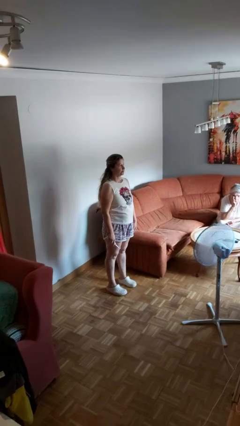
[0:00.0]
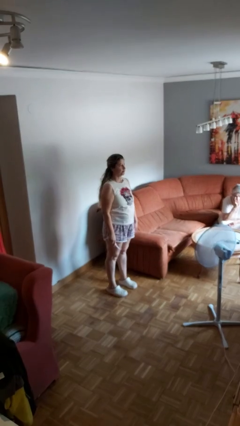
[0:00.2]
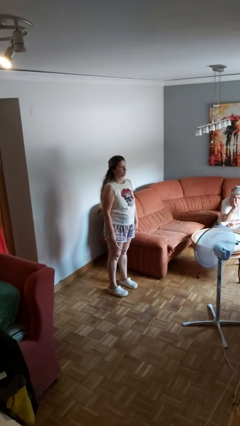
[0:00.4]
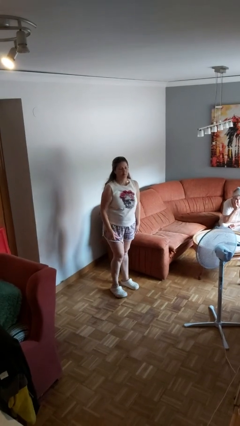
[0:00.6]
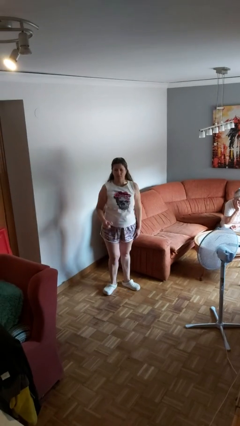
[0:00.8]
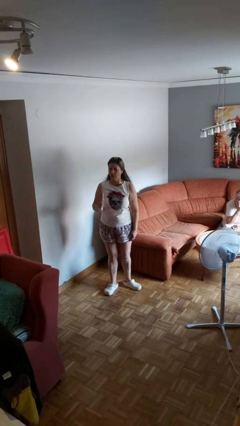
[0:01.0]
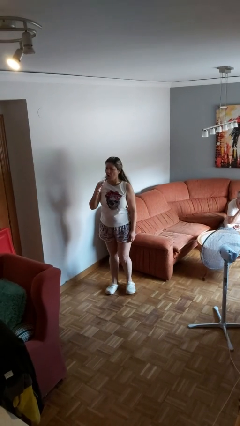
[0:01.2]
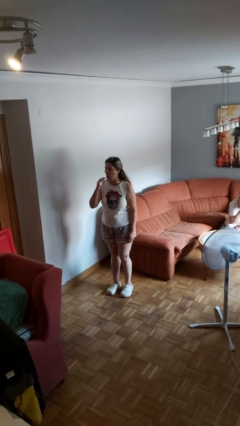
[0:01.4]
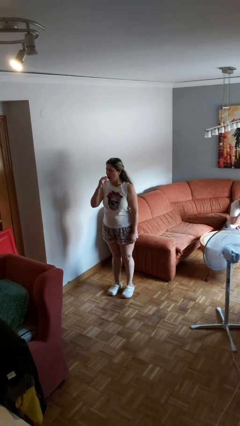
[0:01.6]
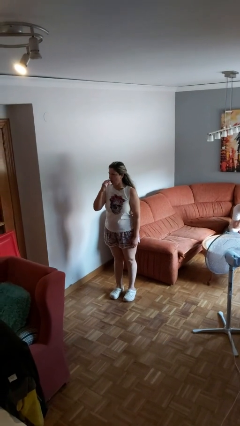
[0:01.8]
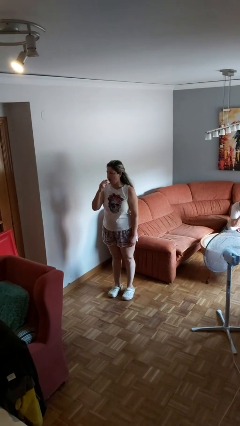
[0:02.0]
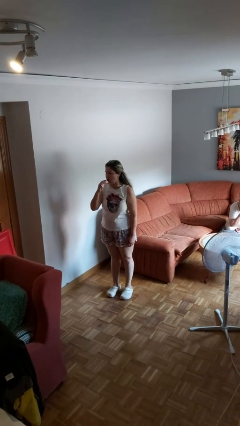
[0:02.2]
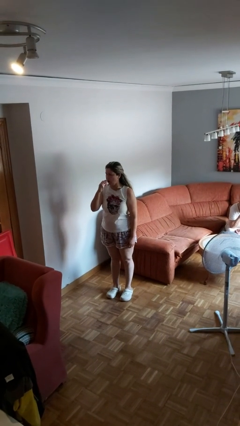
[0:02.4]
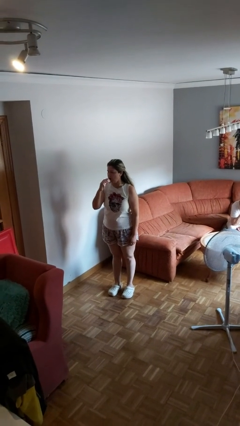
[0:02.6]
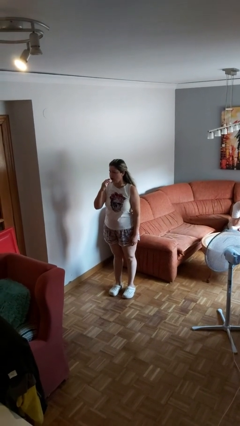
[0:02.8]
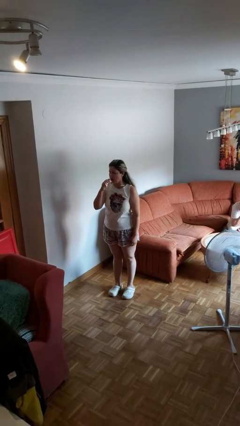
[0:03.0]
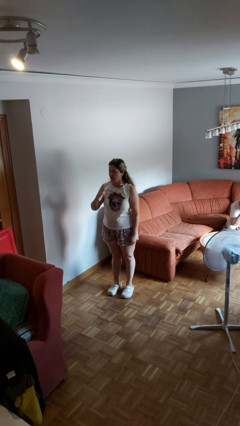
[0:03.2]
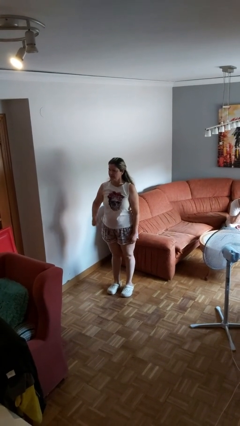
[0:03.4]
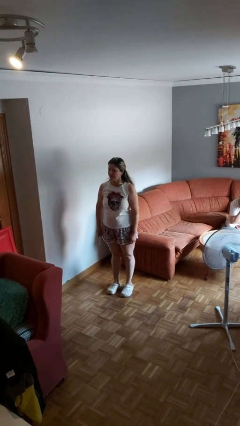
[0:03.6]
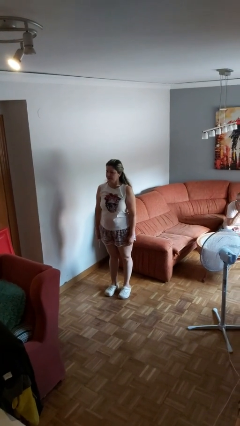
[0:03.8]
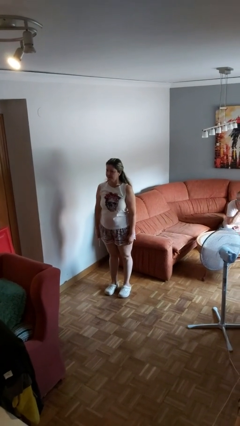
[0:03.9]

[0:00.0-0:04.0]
person brushes teeth

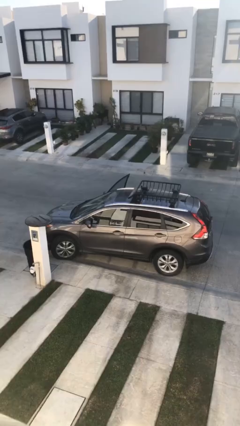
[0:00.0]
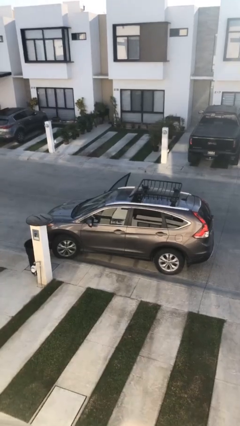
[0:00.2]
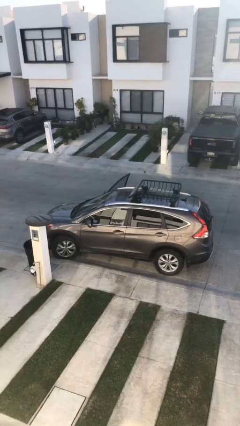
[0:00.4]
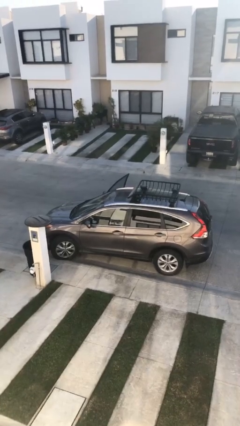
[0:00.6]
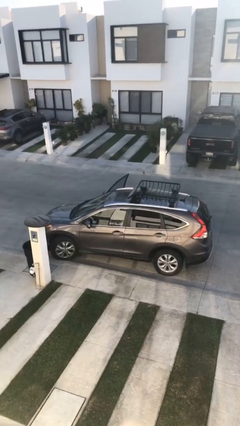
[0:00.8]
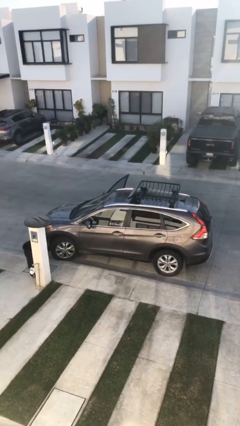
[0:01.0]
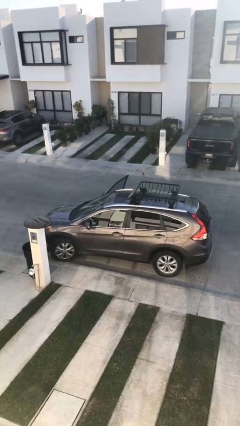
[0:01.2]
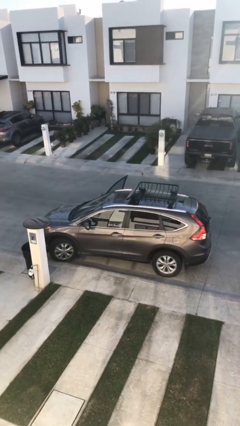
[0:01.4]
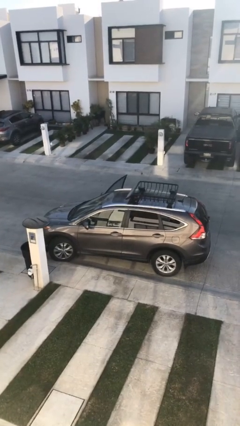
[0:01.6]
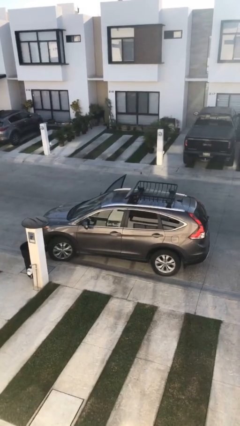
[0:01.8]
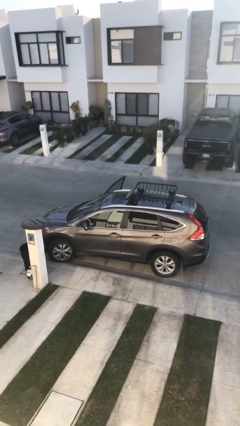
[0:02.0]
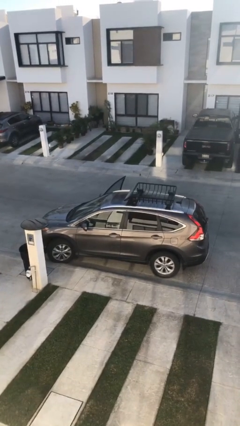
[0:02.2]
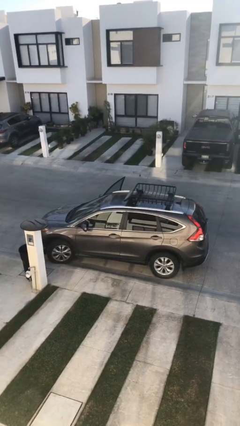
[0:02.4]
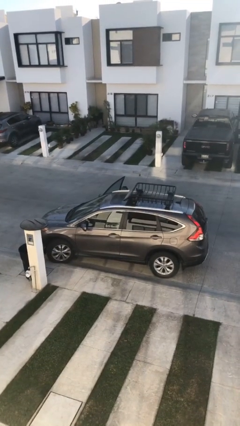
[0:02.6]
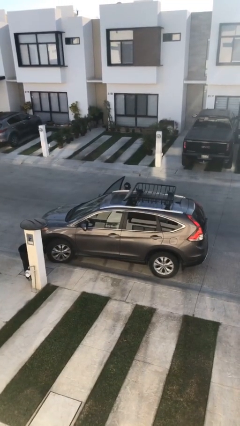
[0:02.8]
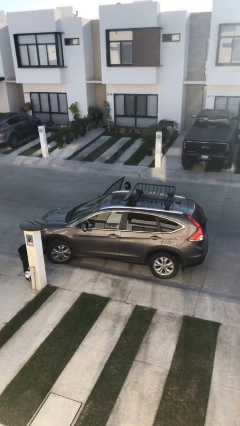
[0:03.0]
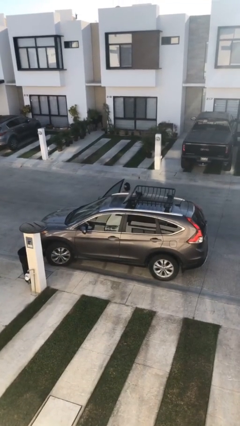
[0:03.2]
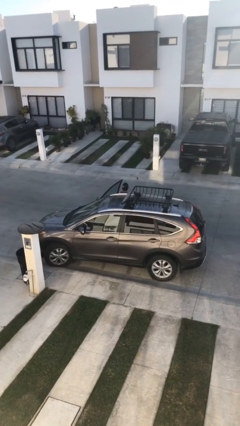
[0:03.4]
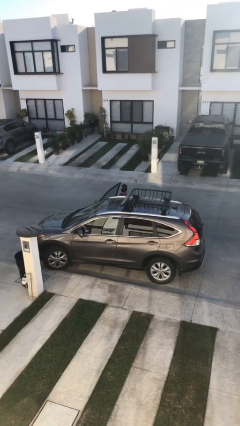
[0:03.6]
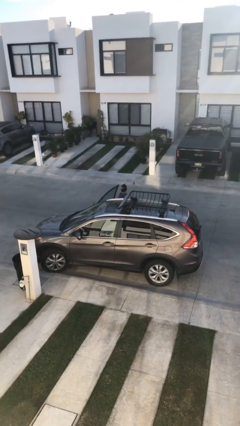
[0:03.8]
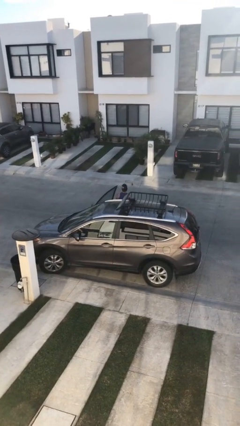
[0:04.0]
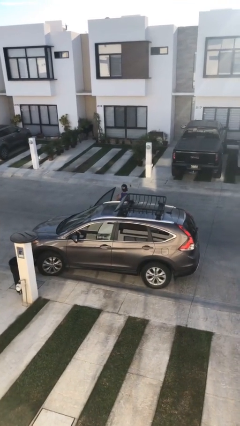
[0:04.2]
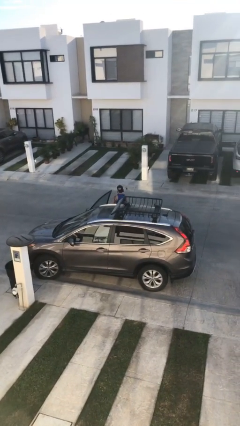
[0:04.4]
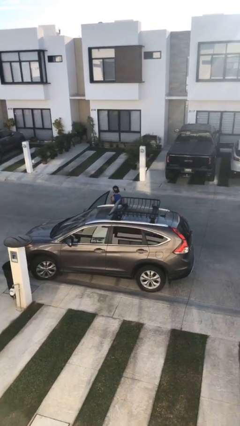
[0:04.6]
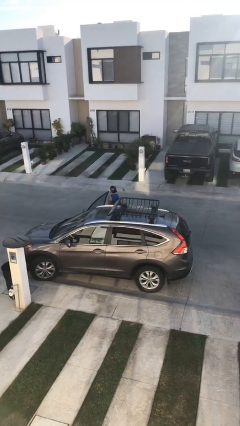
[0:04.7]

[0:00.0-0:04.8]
person exits car

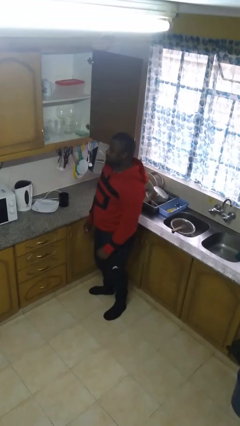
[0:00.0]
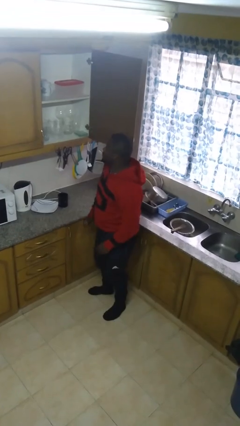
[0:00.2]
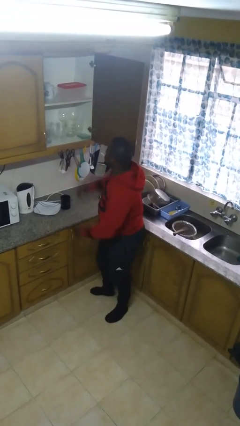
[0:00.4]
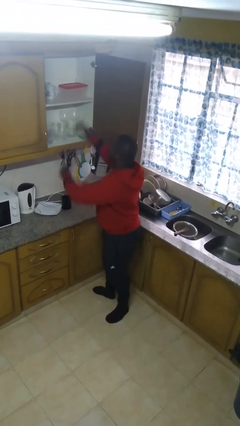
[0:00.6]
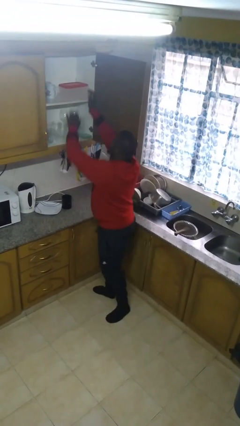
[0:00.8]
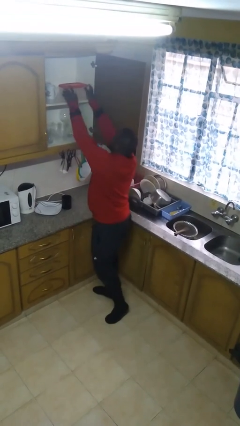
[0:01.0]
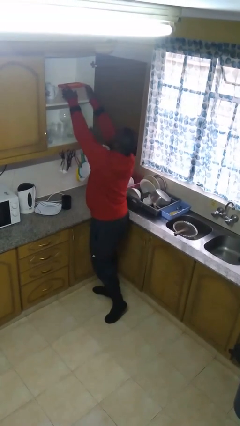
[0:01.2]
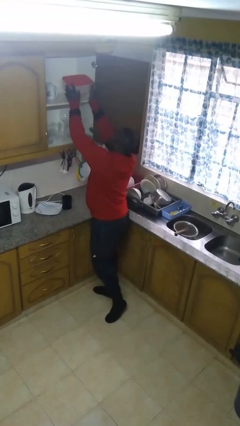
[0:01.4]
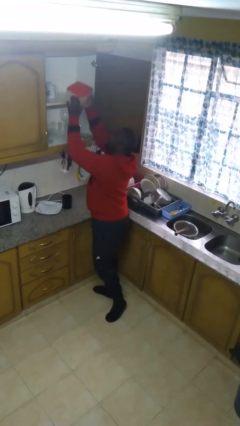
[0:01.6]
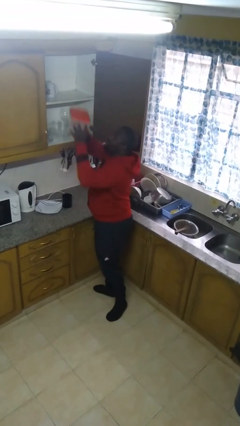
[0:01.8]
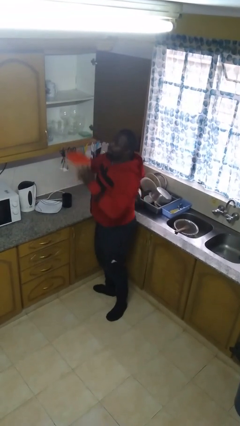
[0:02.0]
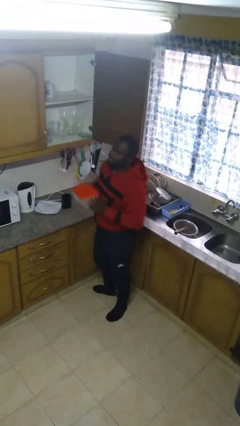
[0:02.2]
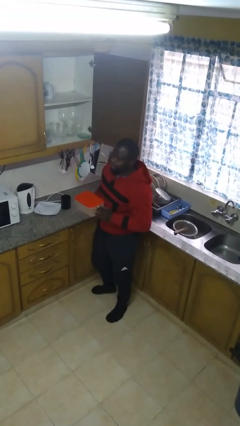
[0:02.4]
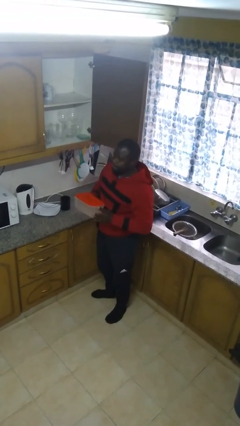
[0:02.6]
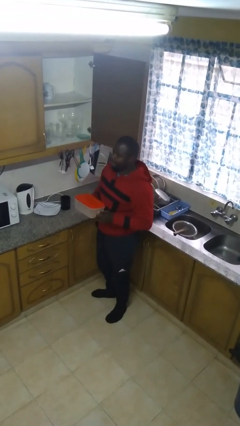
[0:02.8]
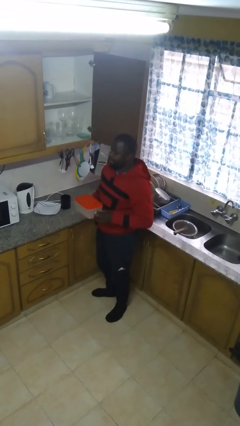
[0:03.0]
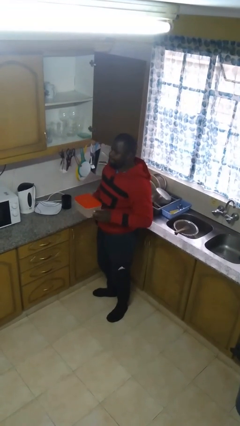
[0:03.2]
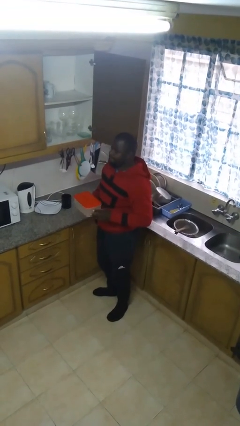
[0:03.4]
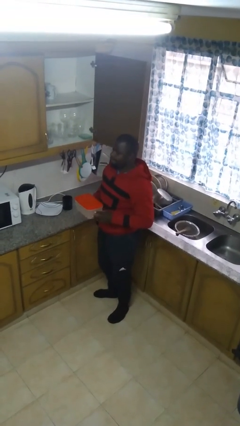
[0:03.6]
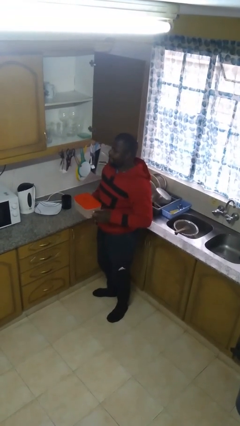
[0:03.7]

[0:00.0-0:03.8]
person picks up object from cabinet

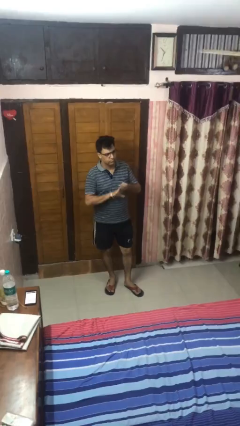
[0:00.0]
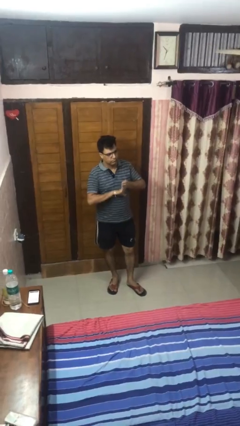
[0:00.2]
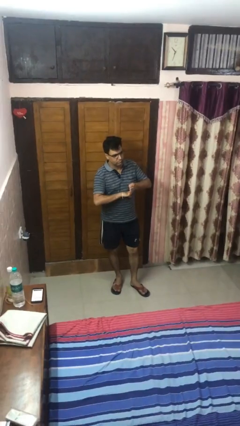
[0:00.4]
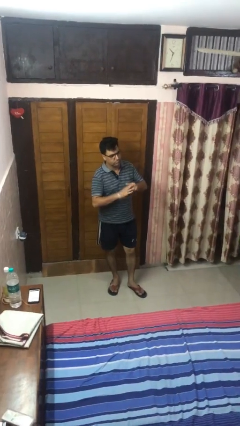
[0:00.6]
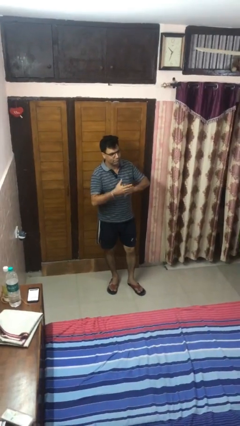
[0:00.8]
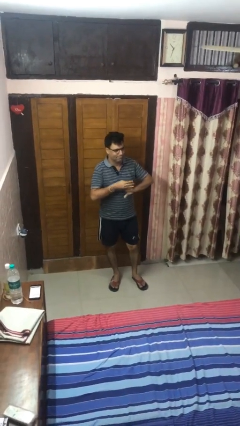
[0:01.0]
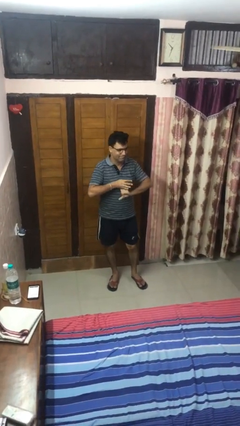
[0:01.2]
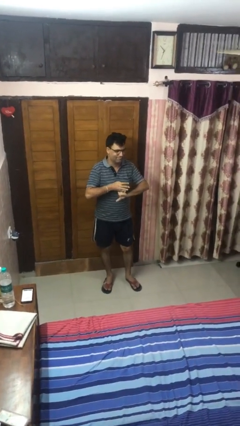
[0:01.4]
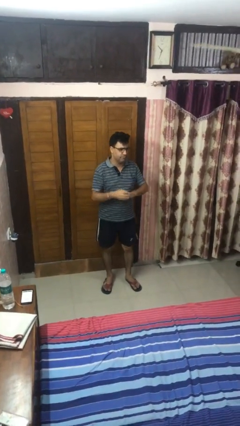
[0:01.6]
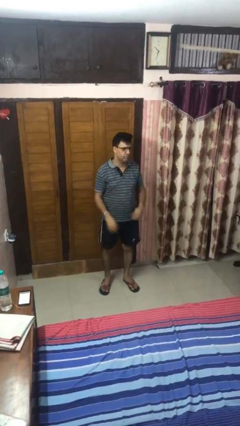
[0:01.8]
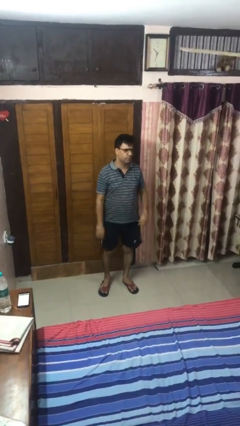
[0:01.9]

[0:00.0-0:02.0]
person cracks knuckles

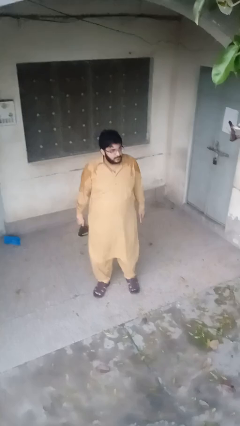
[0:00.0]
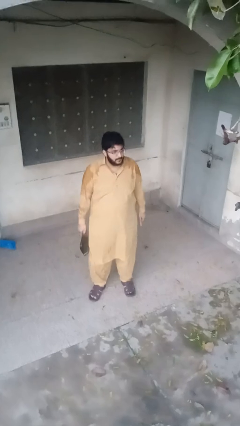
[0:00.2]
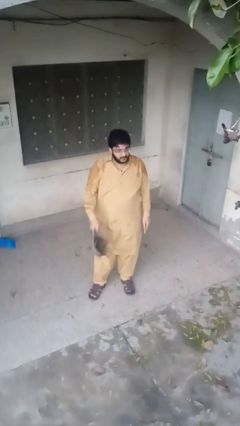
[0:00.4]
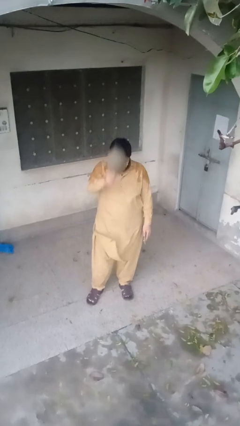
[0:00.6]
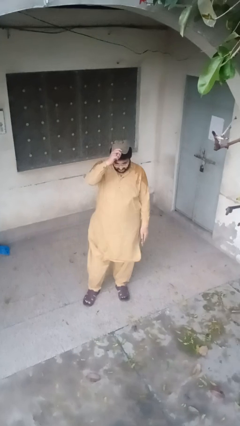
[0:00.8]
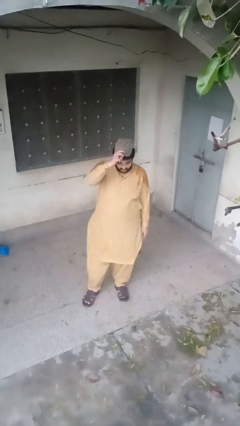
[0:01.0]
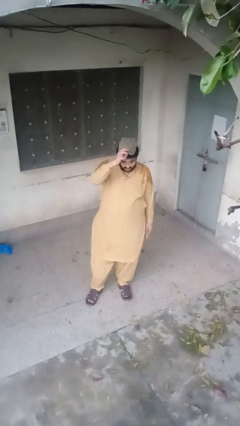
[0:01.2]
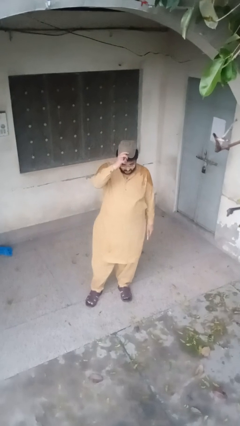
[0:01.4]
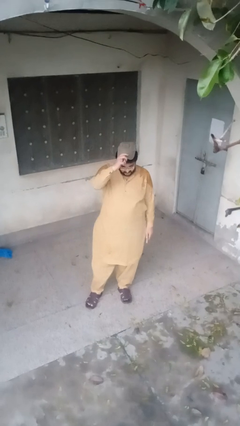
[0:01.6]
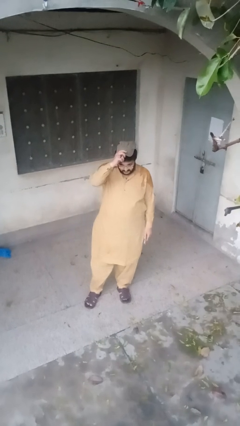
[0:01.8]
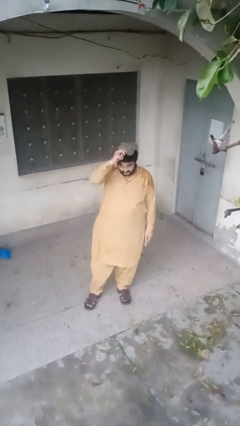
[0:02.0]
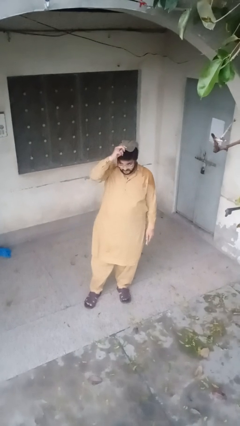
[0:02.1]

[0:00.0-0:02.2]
person puts on hat
